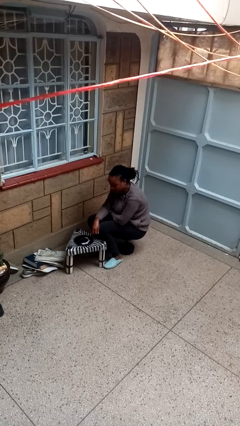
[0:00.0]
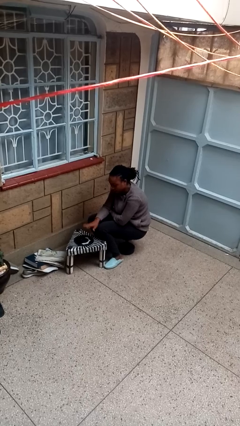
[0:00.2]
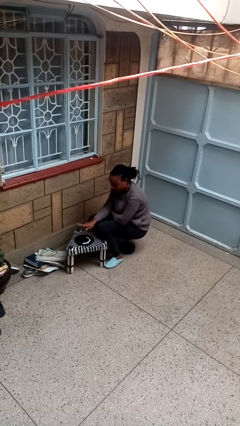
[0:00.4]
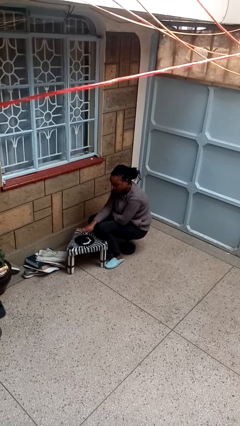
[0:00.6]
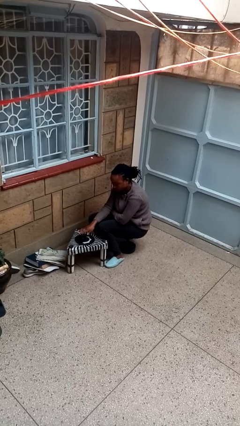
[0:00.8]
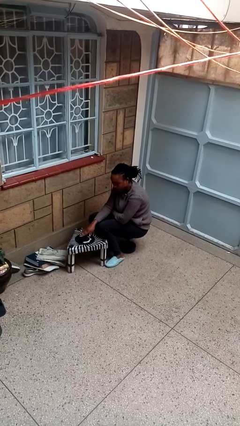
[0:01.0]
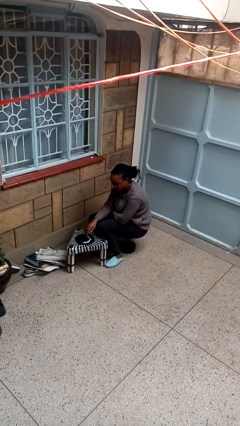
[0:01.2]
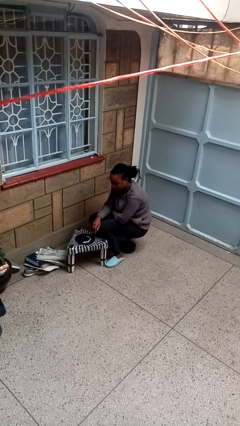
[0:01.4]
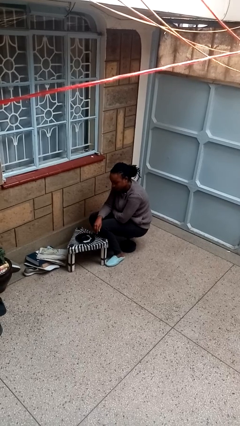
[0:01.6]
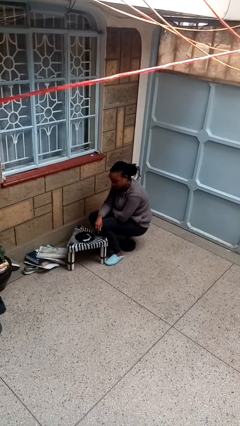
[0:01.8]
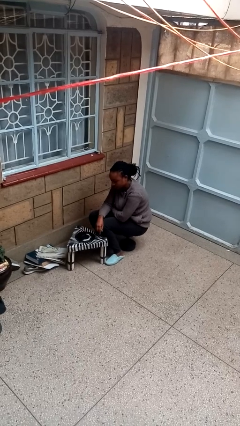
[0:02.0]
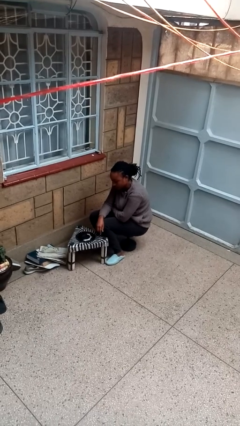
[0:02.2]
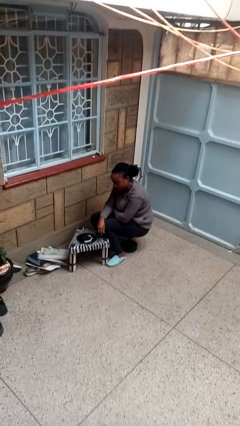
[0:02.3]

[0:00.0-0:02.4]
person taps object with finger

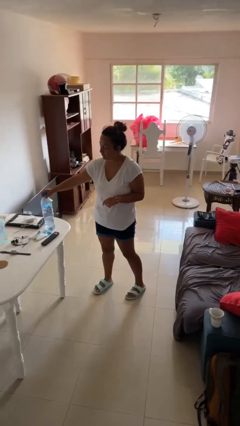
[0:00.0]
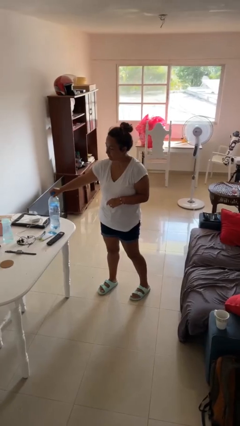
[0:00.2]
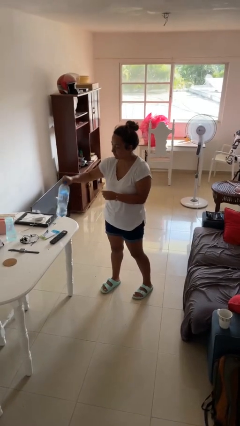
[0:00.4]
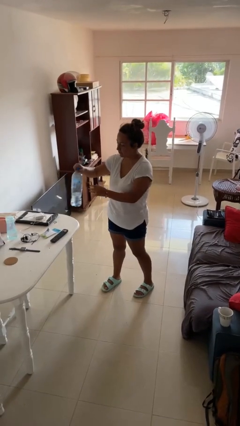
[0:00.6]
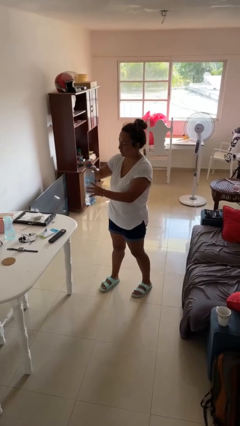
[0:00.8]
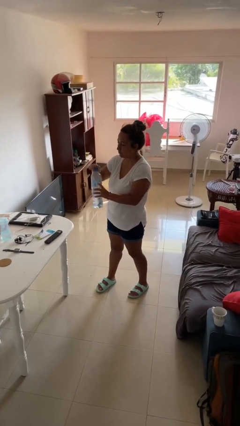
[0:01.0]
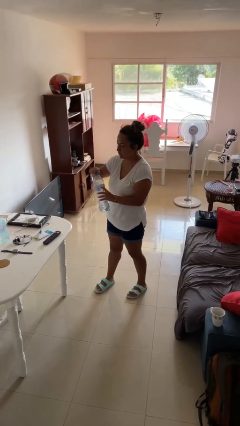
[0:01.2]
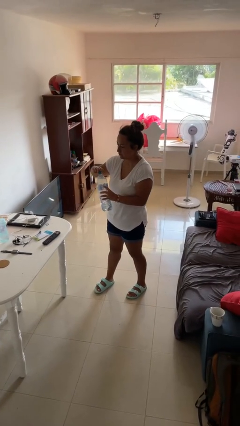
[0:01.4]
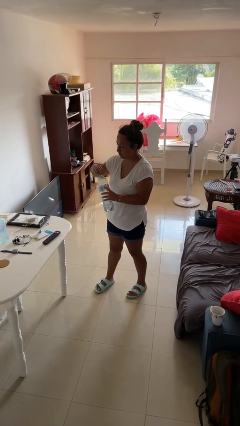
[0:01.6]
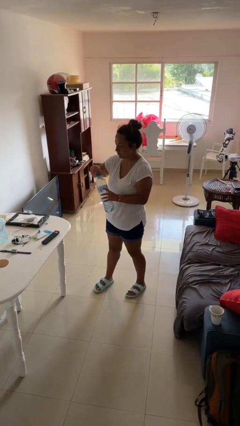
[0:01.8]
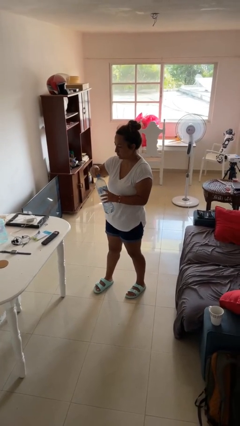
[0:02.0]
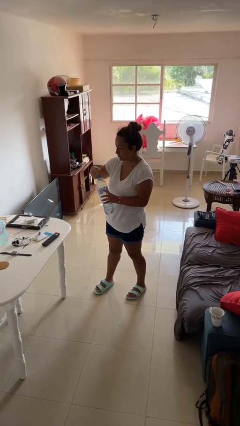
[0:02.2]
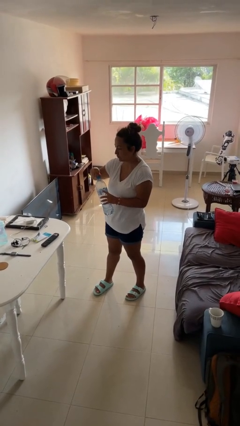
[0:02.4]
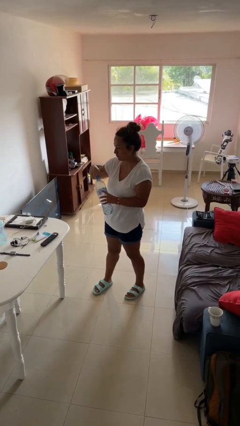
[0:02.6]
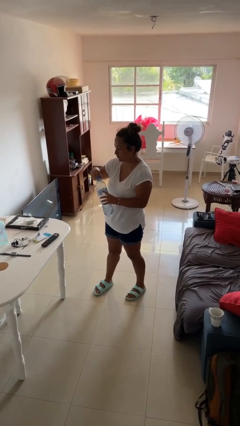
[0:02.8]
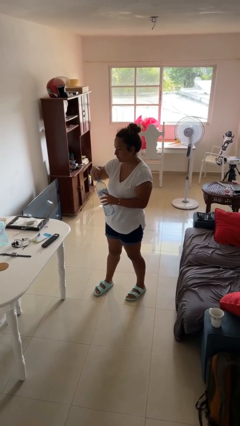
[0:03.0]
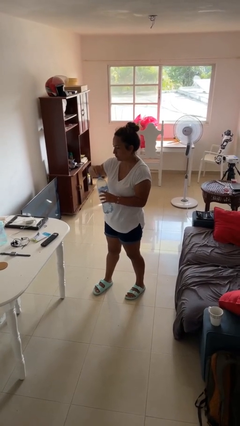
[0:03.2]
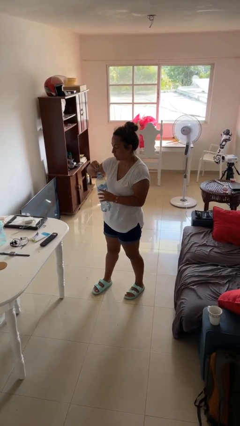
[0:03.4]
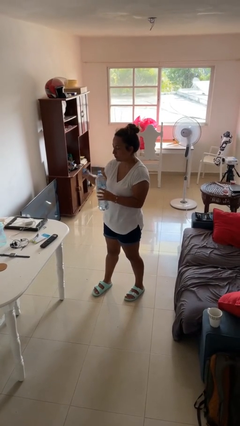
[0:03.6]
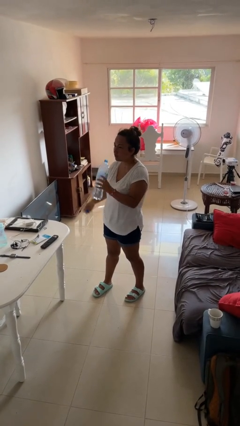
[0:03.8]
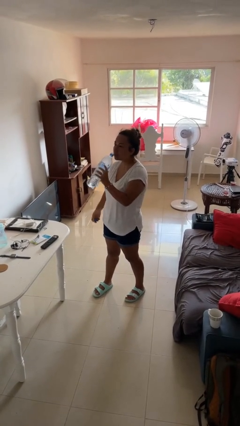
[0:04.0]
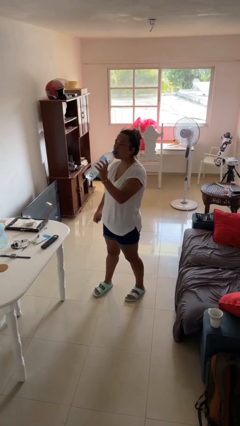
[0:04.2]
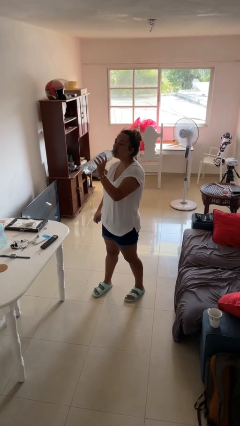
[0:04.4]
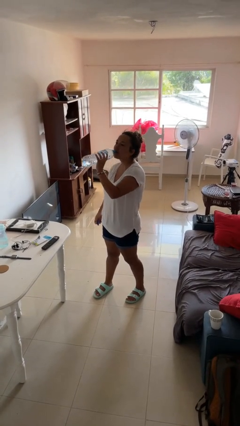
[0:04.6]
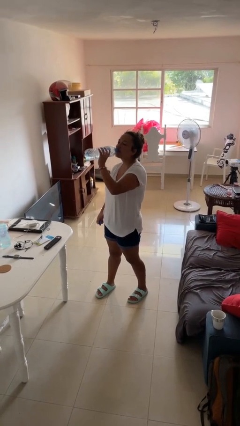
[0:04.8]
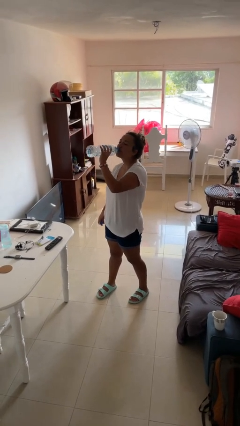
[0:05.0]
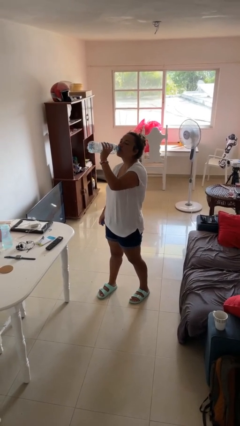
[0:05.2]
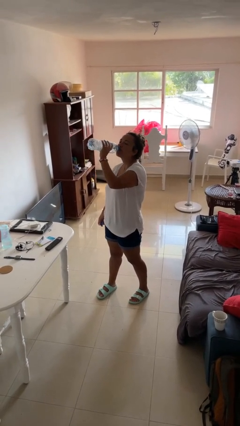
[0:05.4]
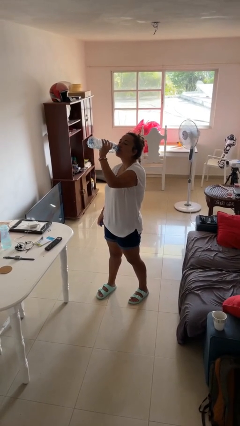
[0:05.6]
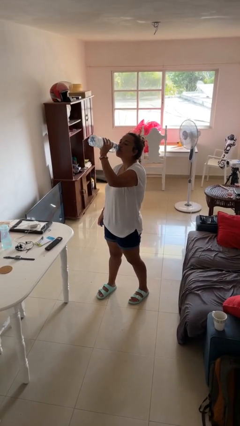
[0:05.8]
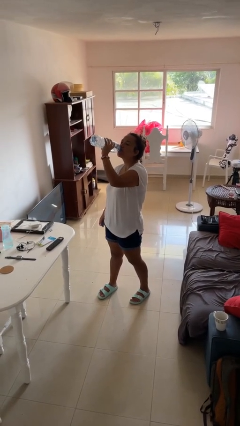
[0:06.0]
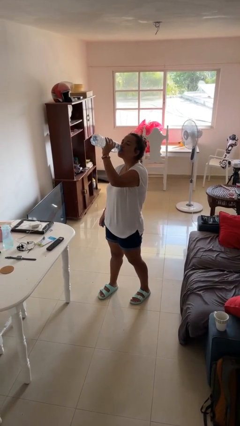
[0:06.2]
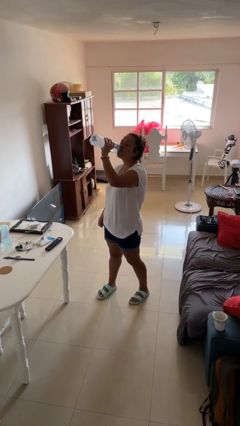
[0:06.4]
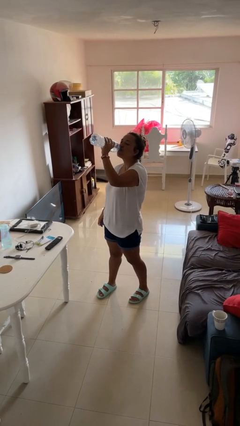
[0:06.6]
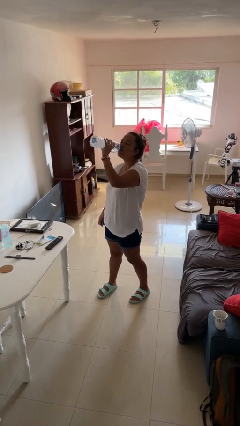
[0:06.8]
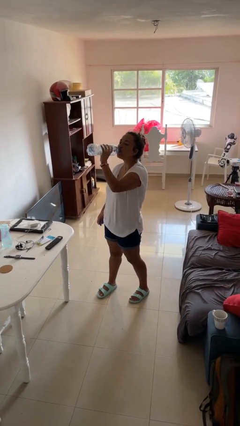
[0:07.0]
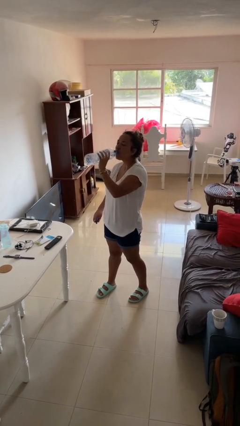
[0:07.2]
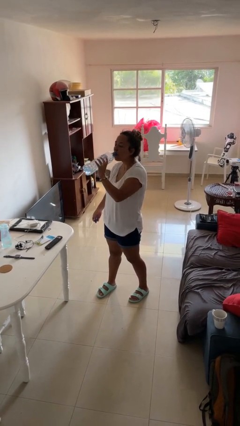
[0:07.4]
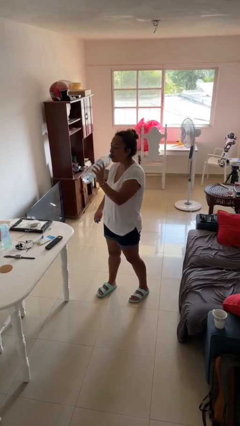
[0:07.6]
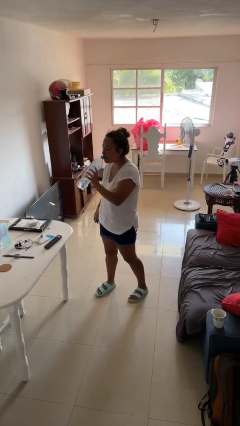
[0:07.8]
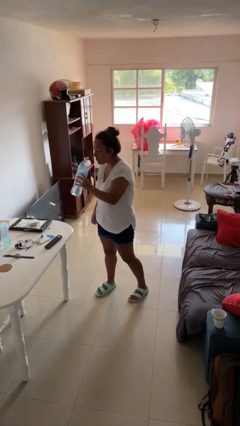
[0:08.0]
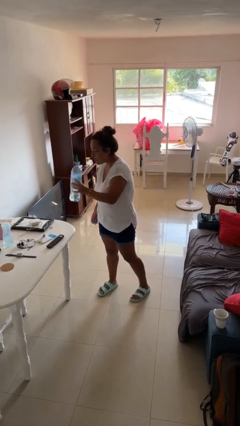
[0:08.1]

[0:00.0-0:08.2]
person drinks from bottle

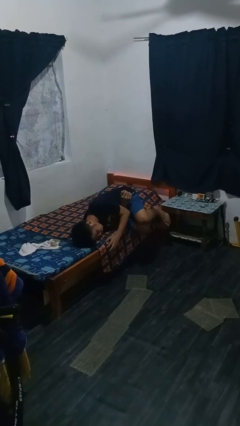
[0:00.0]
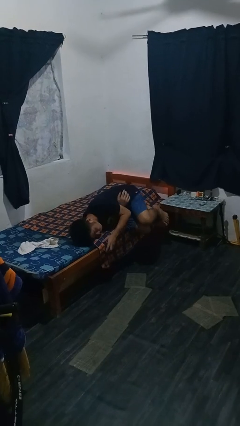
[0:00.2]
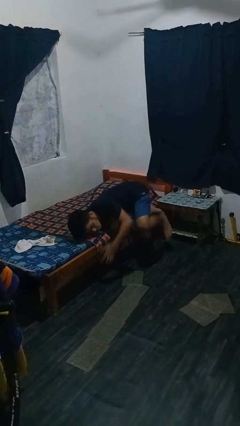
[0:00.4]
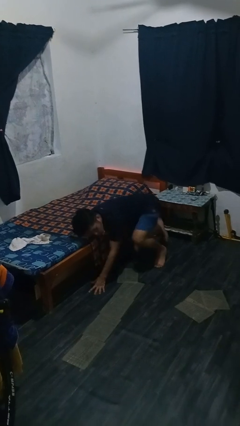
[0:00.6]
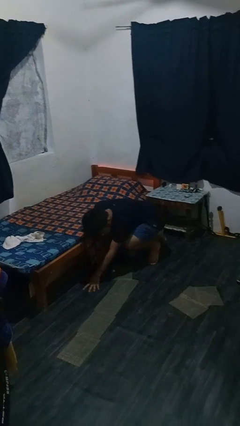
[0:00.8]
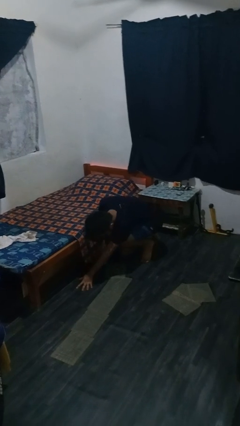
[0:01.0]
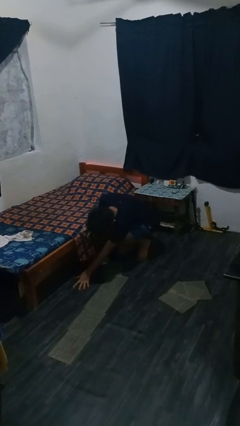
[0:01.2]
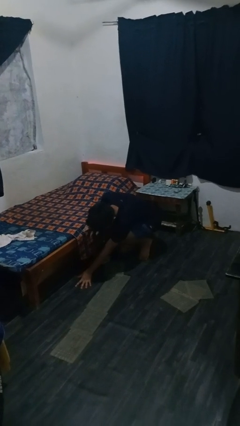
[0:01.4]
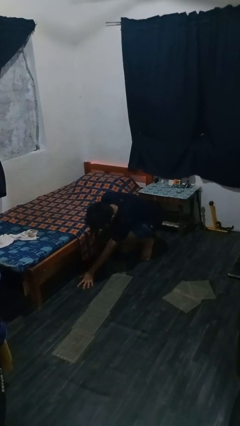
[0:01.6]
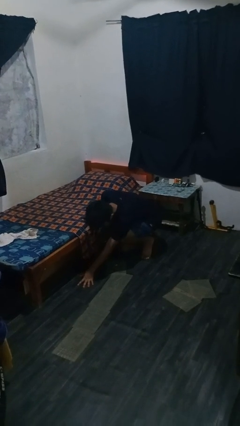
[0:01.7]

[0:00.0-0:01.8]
person falls from bed

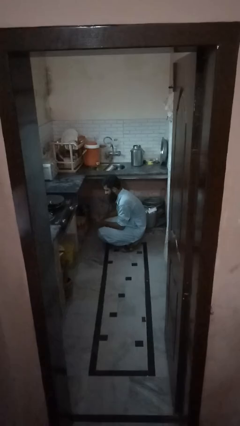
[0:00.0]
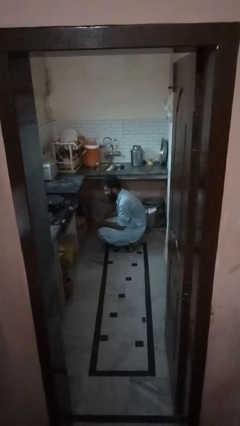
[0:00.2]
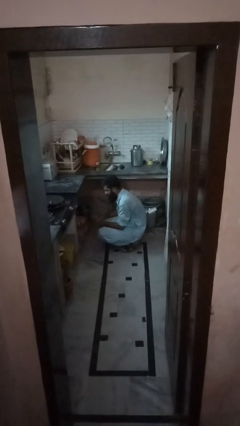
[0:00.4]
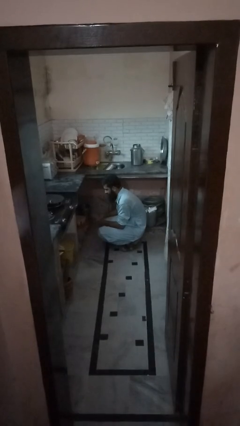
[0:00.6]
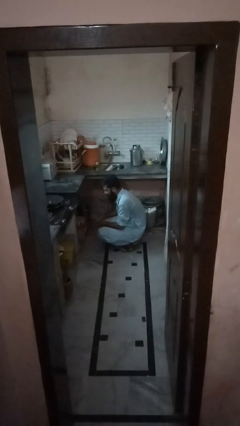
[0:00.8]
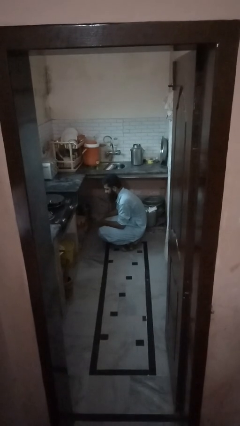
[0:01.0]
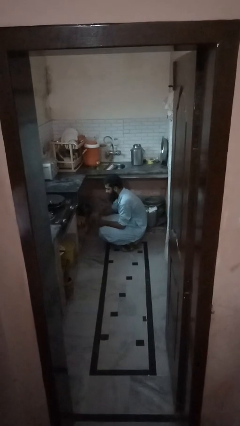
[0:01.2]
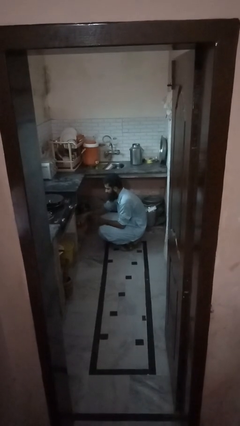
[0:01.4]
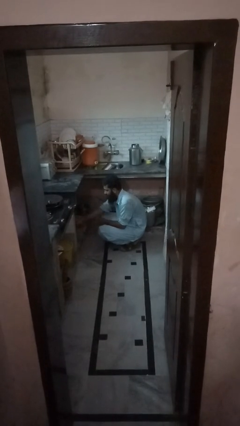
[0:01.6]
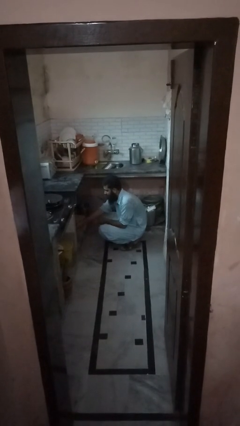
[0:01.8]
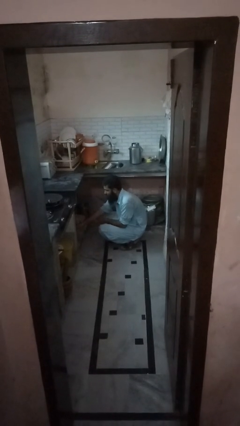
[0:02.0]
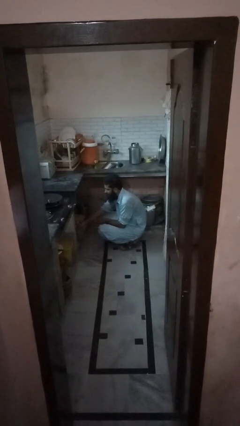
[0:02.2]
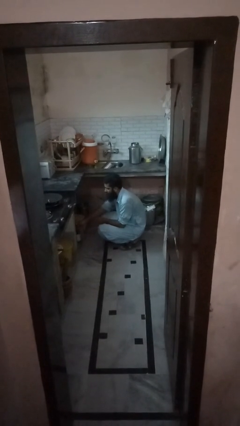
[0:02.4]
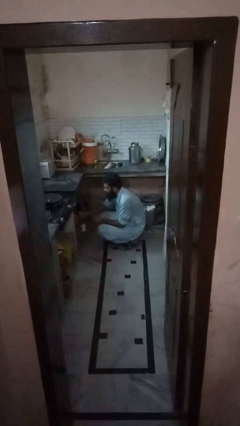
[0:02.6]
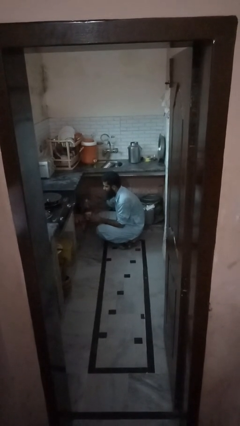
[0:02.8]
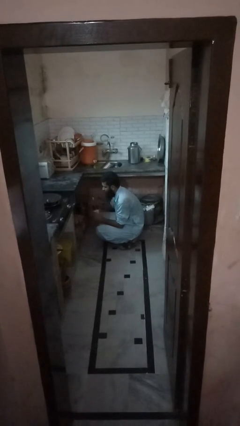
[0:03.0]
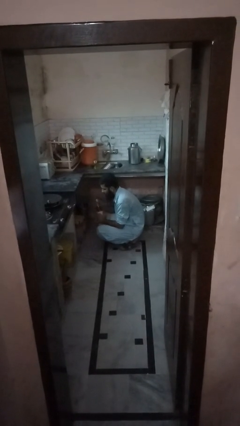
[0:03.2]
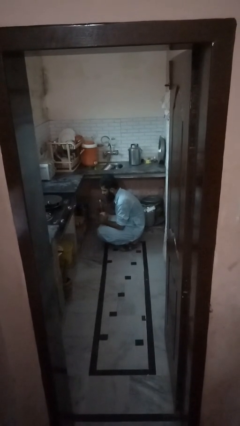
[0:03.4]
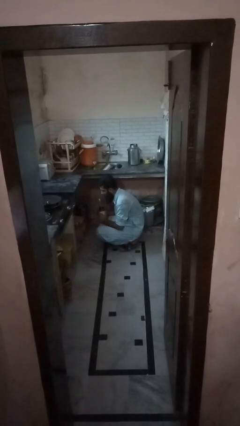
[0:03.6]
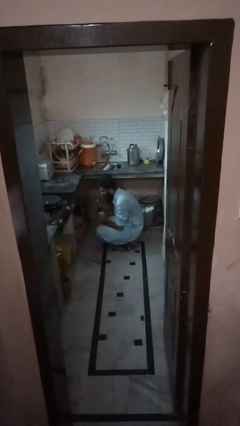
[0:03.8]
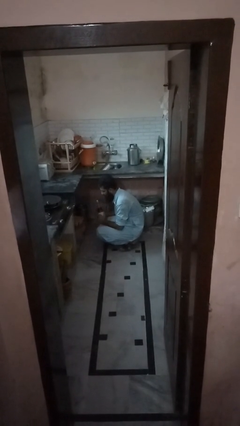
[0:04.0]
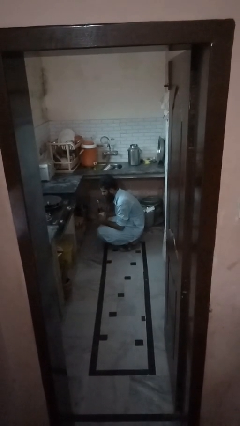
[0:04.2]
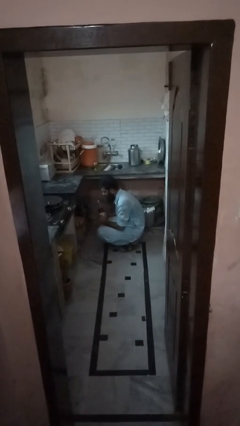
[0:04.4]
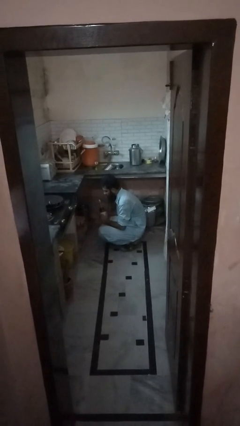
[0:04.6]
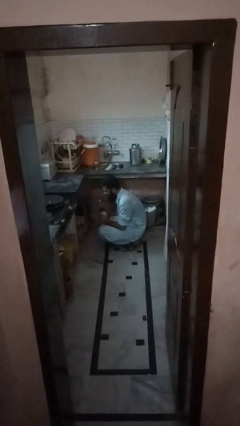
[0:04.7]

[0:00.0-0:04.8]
person picks up object from cabinet

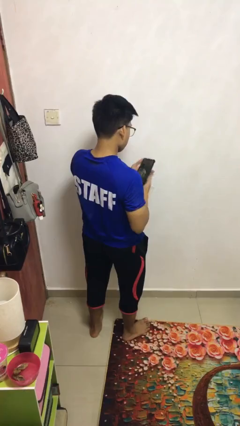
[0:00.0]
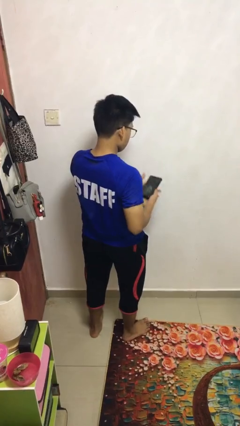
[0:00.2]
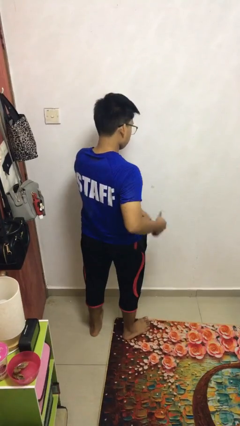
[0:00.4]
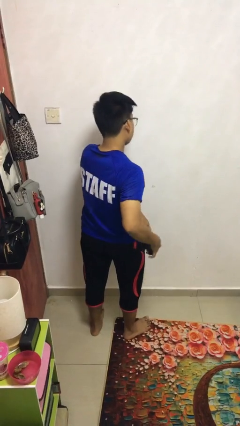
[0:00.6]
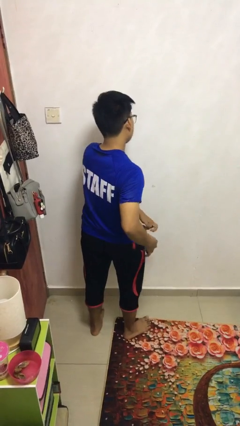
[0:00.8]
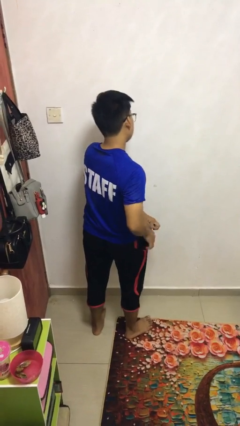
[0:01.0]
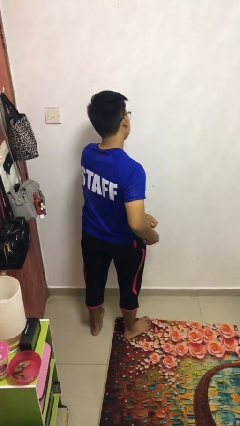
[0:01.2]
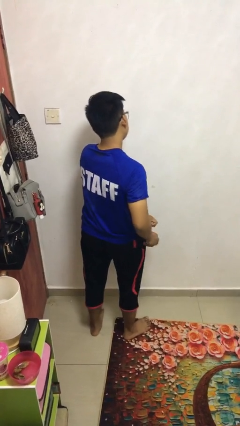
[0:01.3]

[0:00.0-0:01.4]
person puts phone into pocket
